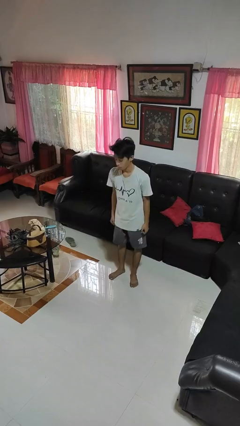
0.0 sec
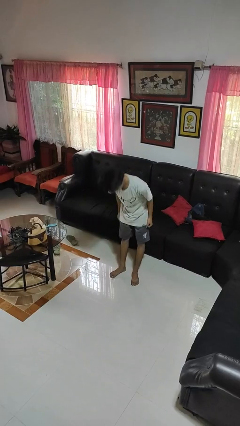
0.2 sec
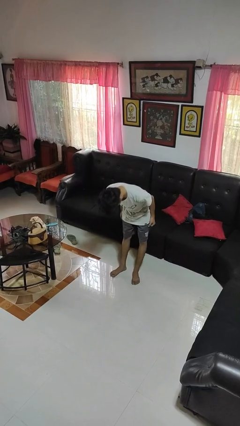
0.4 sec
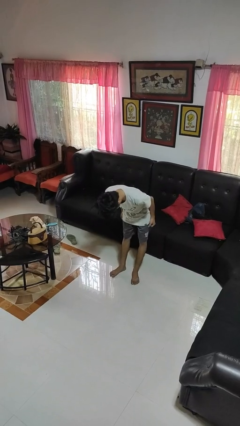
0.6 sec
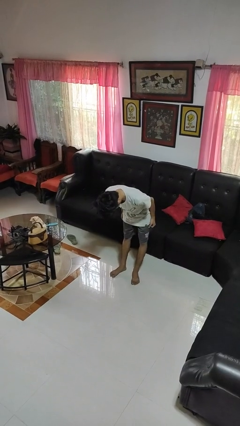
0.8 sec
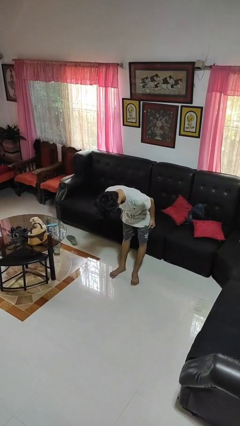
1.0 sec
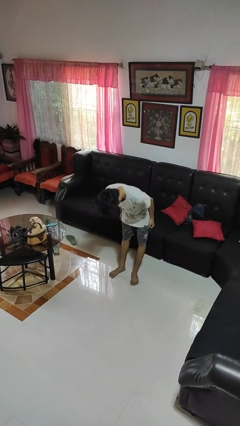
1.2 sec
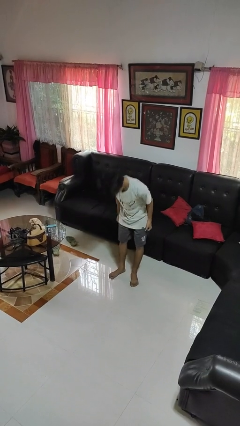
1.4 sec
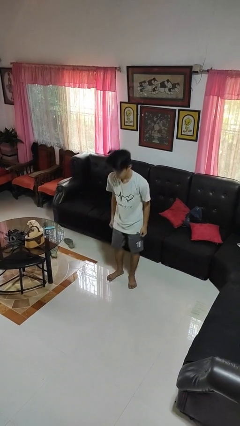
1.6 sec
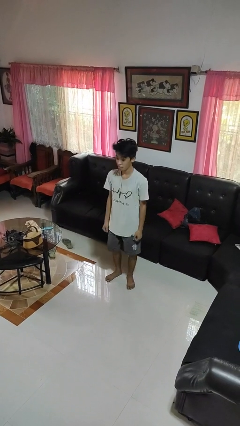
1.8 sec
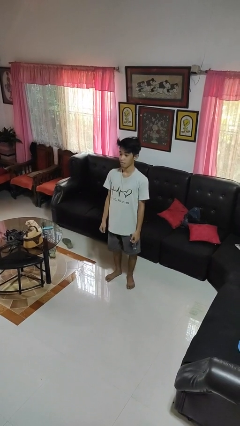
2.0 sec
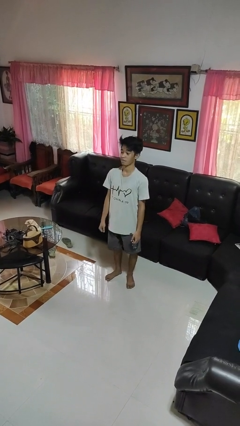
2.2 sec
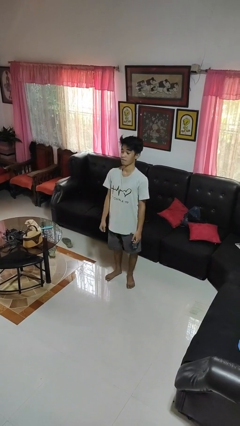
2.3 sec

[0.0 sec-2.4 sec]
person bows

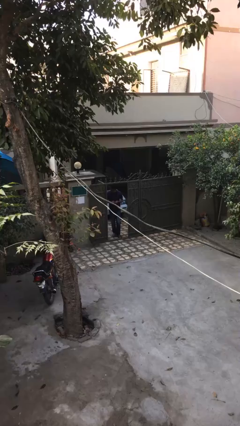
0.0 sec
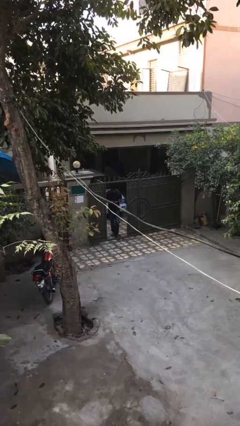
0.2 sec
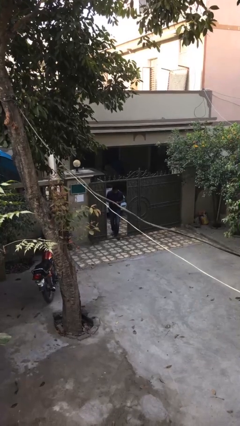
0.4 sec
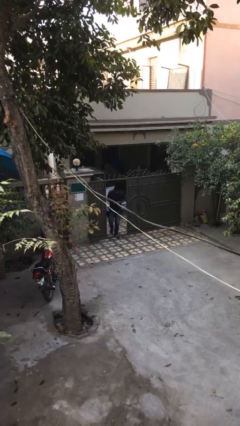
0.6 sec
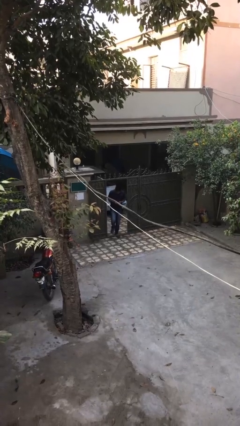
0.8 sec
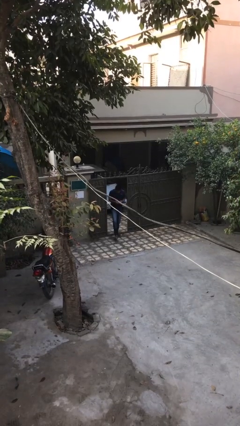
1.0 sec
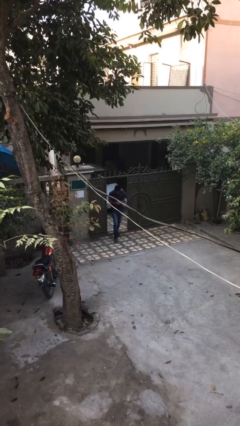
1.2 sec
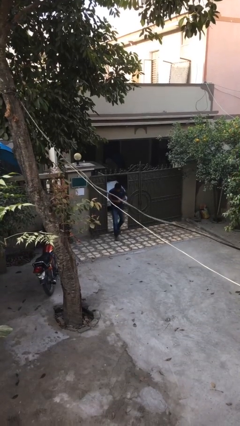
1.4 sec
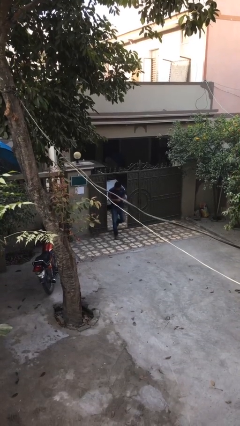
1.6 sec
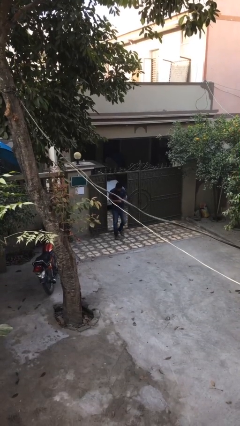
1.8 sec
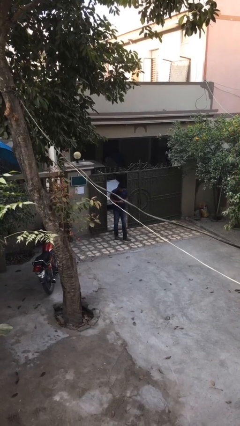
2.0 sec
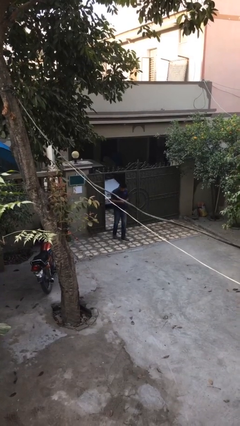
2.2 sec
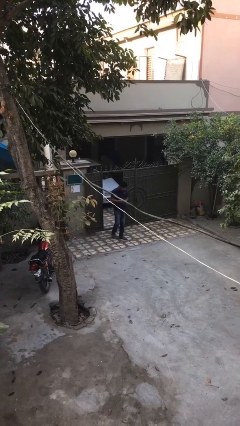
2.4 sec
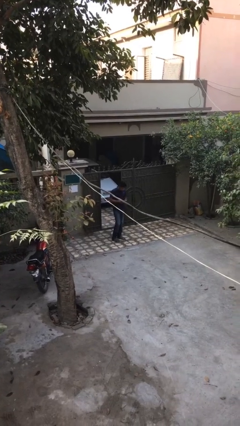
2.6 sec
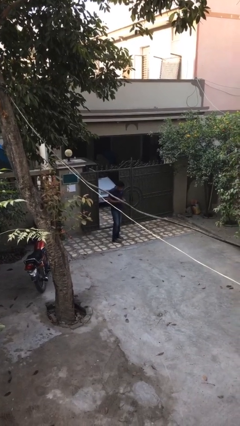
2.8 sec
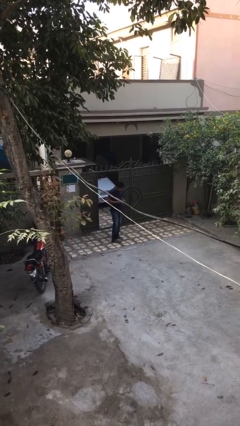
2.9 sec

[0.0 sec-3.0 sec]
person enters scene through structure

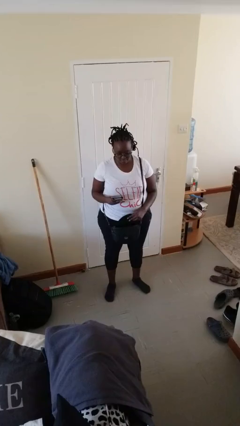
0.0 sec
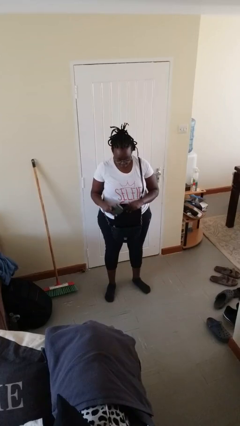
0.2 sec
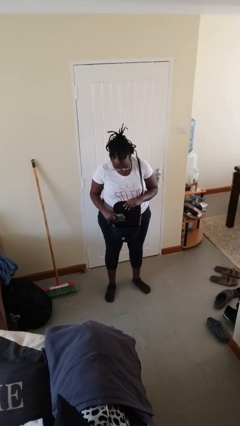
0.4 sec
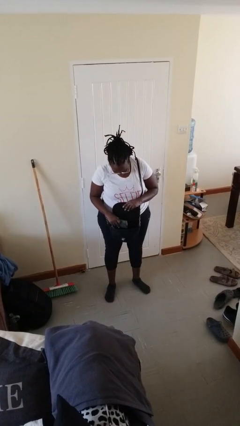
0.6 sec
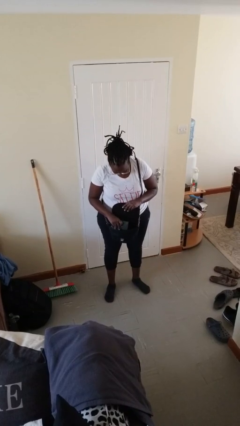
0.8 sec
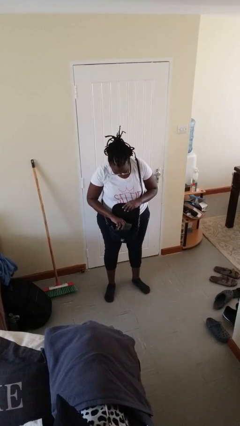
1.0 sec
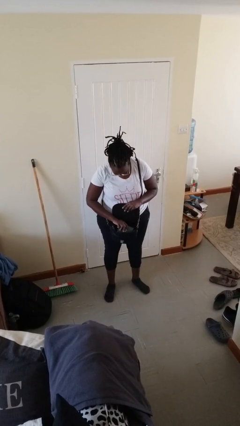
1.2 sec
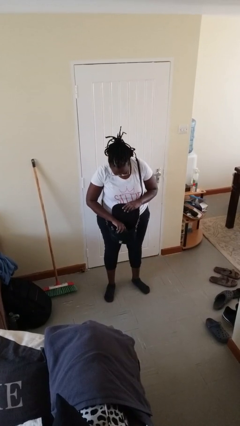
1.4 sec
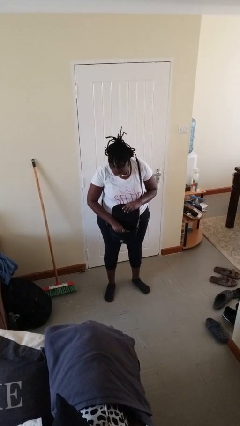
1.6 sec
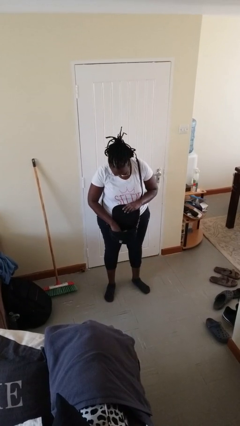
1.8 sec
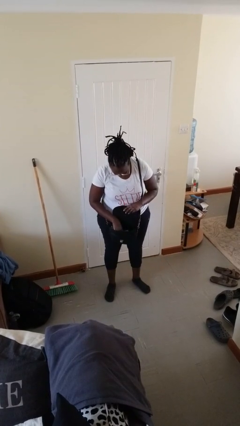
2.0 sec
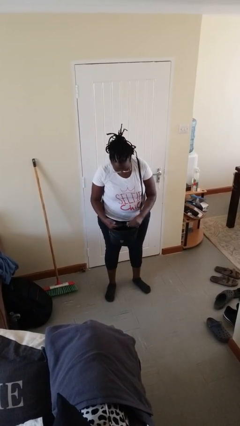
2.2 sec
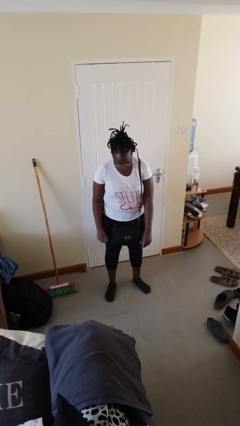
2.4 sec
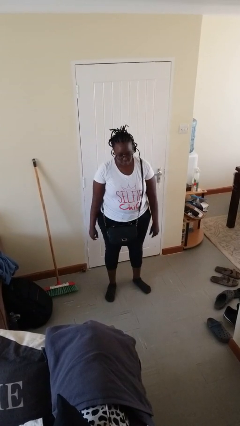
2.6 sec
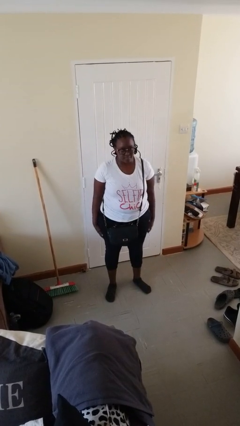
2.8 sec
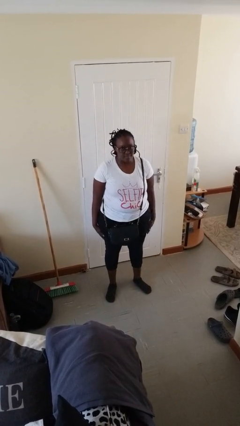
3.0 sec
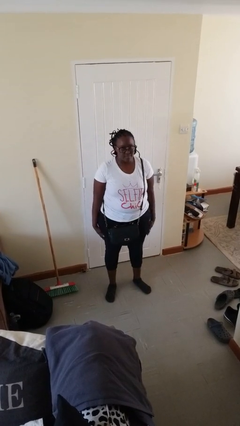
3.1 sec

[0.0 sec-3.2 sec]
person puts object into purse

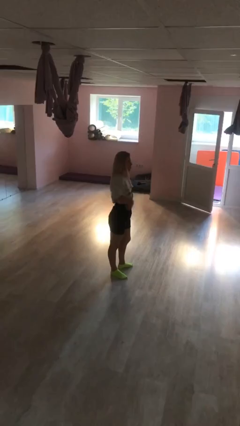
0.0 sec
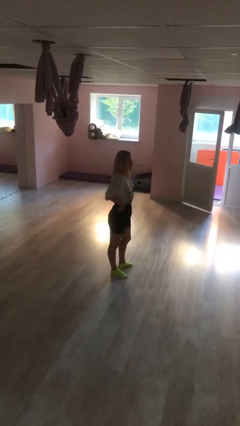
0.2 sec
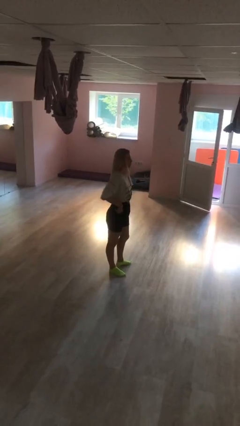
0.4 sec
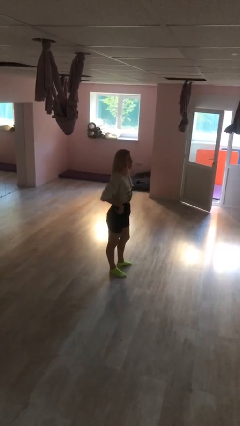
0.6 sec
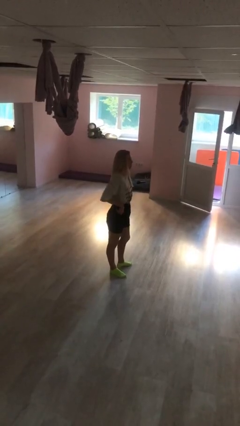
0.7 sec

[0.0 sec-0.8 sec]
person puts phone into pocket

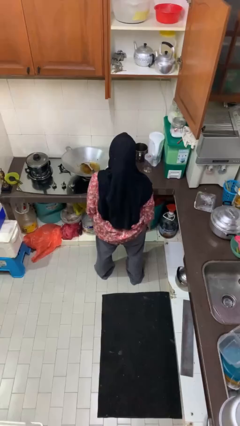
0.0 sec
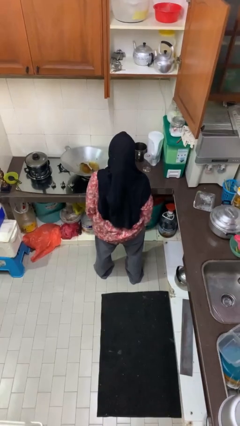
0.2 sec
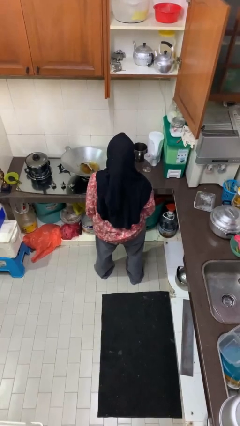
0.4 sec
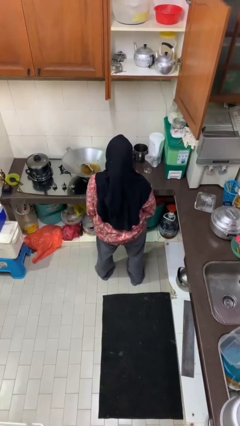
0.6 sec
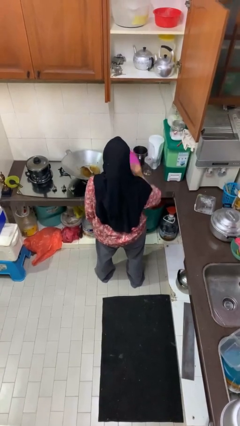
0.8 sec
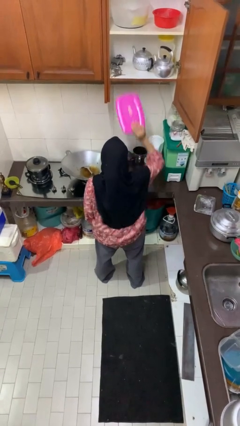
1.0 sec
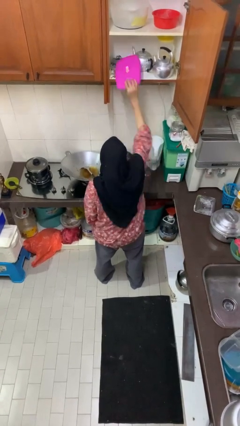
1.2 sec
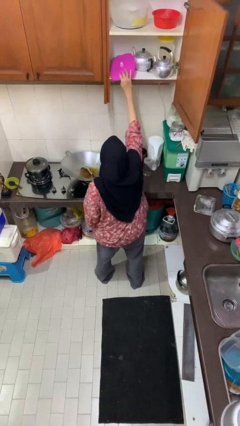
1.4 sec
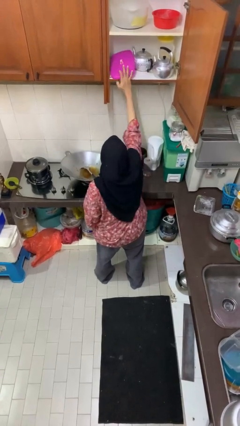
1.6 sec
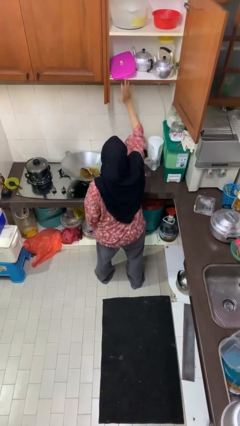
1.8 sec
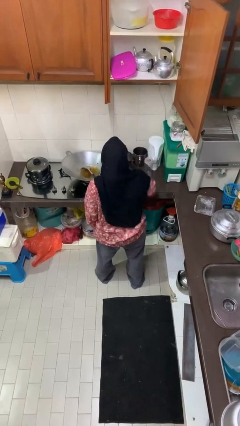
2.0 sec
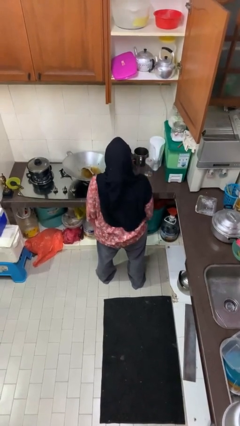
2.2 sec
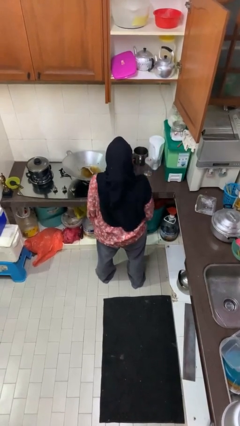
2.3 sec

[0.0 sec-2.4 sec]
person puts object in cabinet

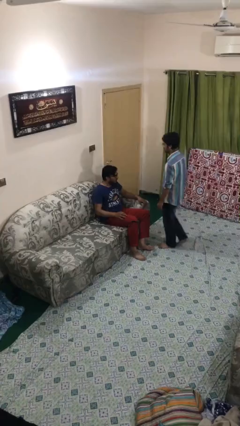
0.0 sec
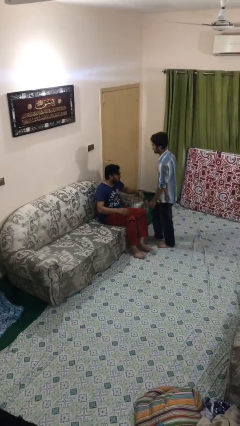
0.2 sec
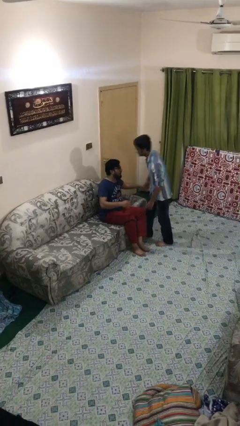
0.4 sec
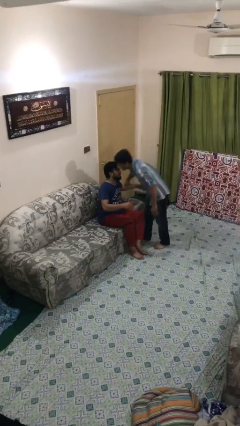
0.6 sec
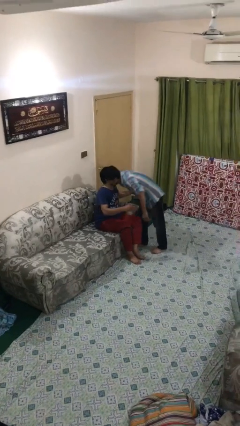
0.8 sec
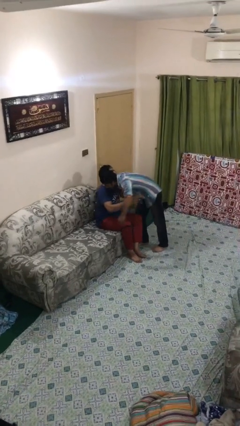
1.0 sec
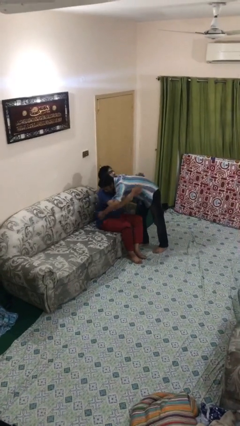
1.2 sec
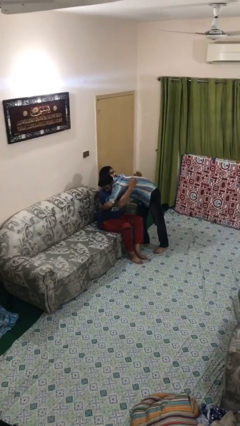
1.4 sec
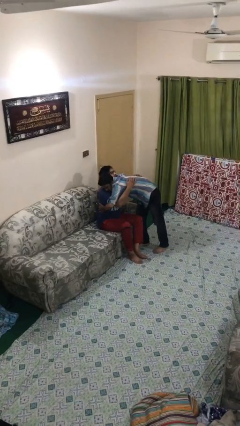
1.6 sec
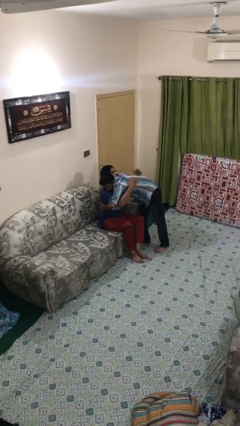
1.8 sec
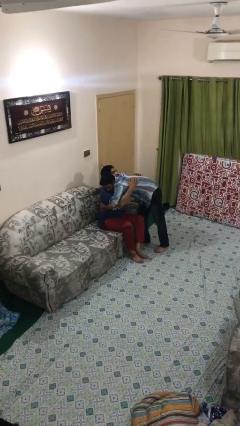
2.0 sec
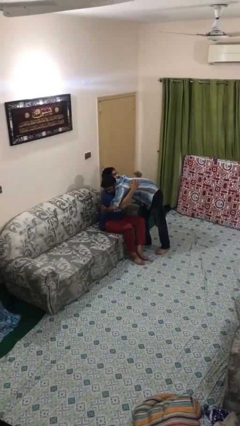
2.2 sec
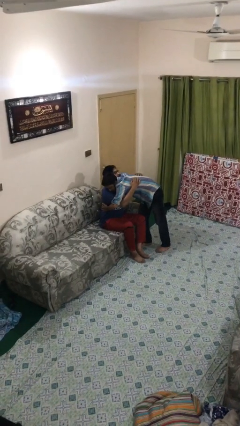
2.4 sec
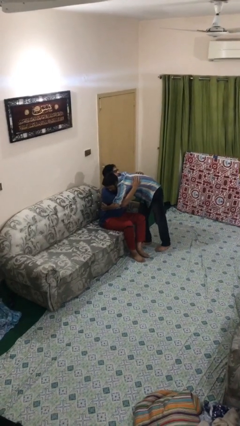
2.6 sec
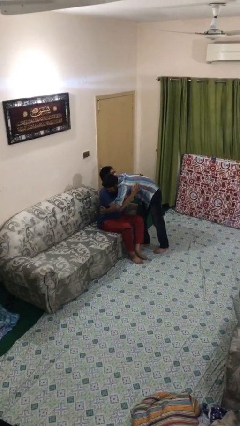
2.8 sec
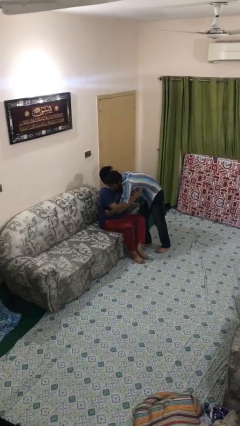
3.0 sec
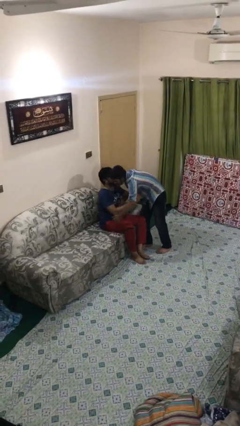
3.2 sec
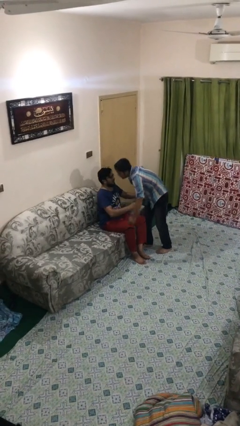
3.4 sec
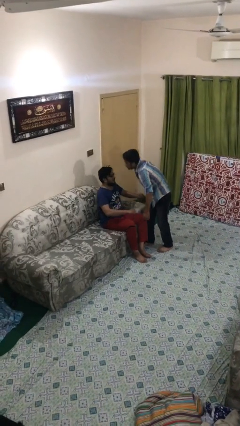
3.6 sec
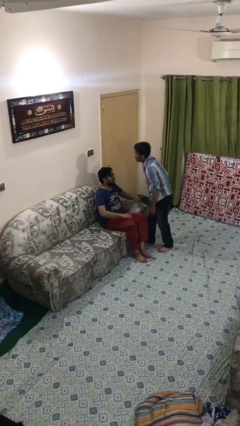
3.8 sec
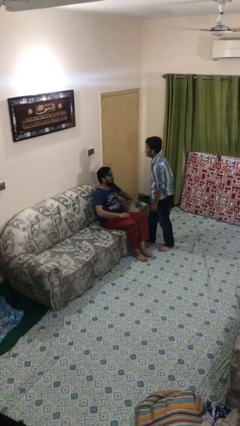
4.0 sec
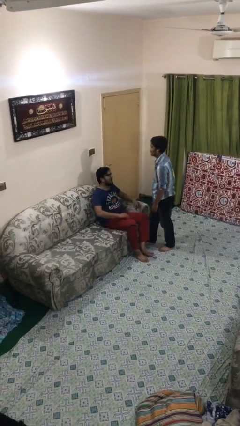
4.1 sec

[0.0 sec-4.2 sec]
person embraces person

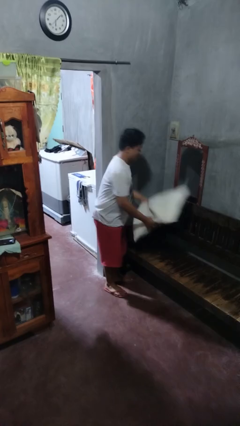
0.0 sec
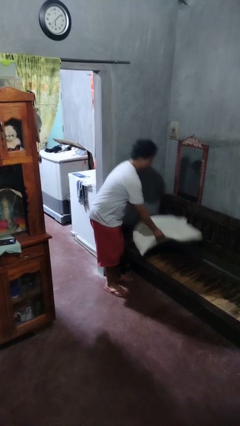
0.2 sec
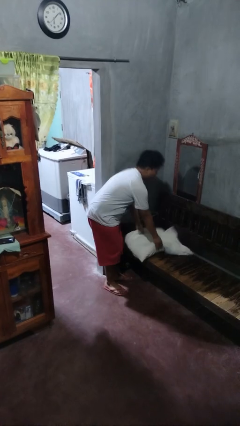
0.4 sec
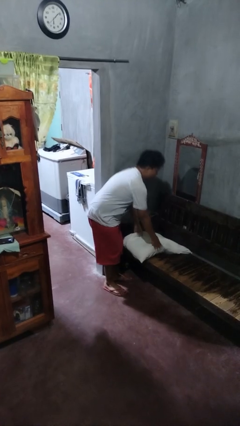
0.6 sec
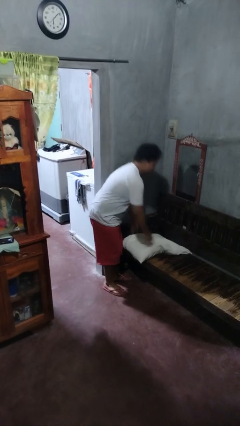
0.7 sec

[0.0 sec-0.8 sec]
person puts down object on couch
